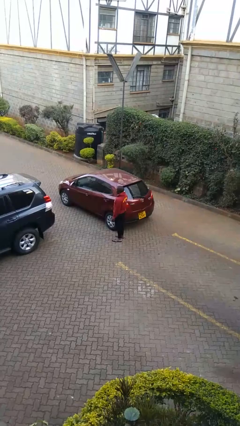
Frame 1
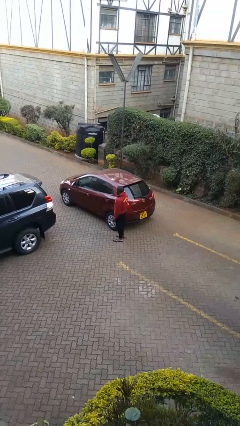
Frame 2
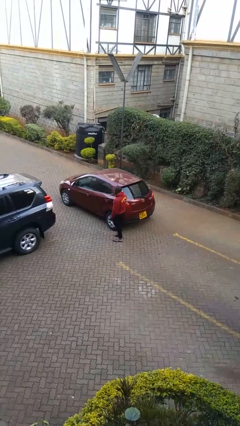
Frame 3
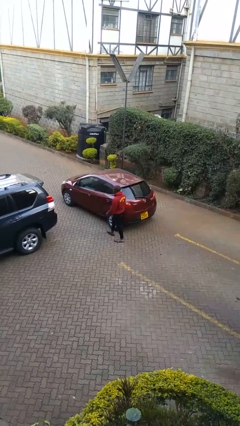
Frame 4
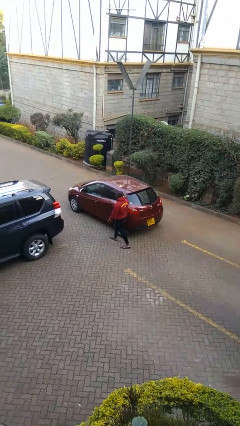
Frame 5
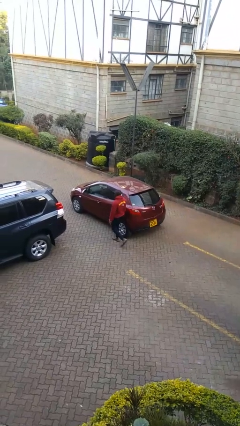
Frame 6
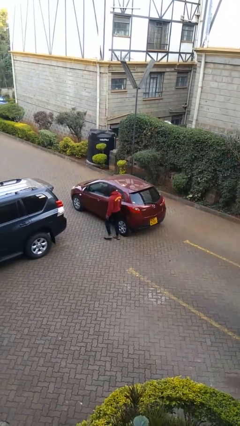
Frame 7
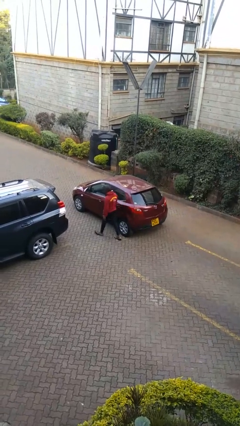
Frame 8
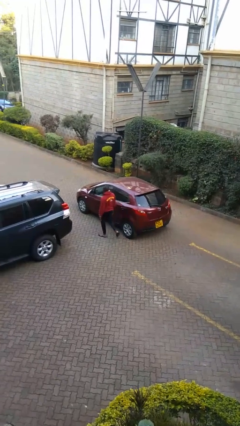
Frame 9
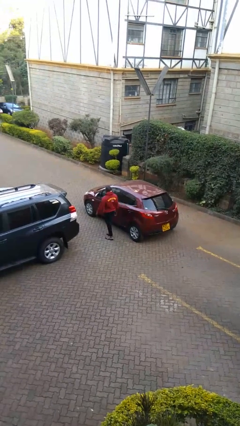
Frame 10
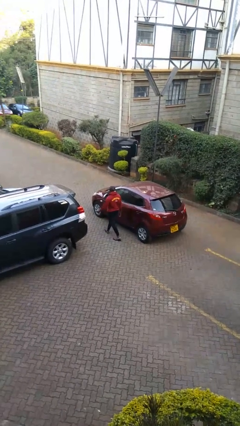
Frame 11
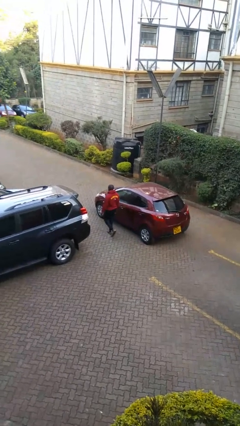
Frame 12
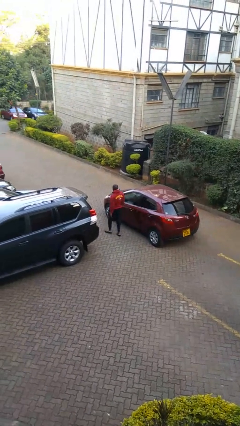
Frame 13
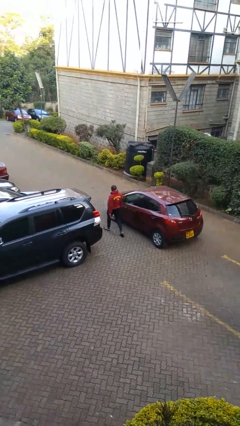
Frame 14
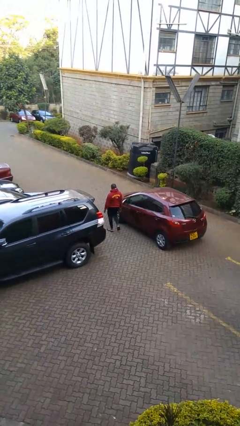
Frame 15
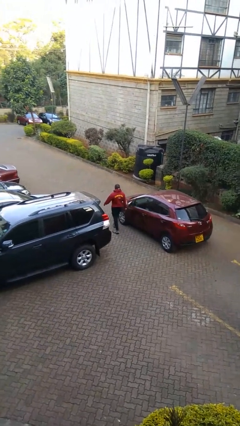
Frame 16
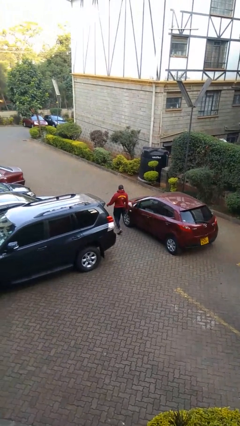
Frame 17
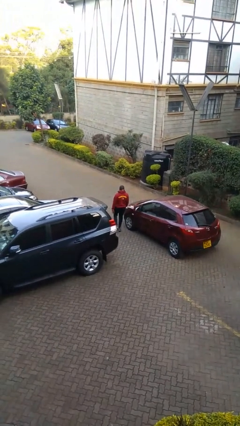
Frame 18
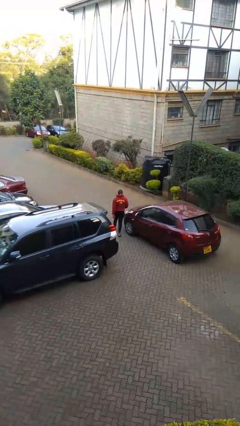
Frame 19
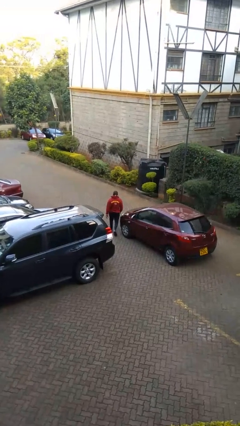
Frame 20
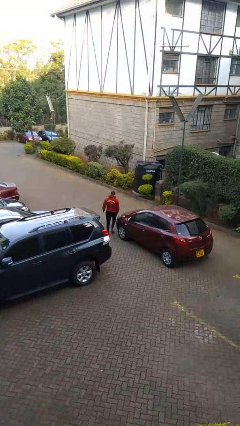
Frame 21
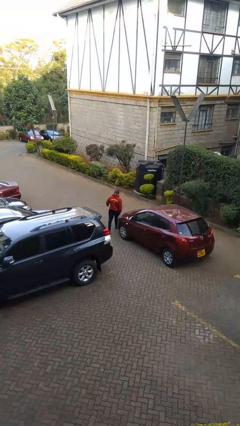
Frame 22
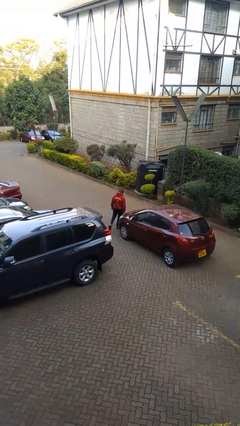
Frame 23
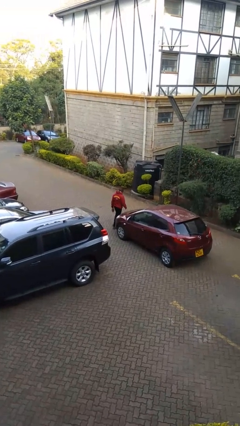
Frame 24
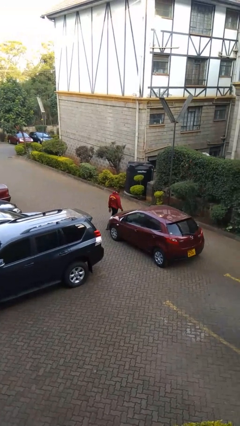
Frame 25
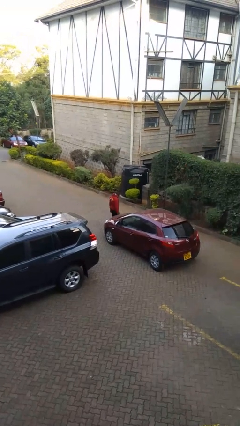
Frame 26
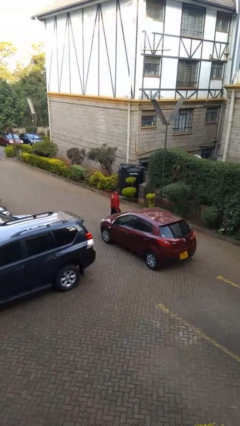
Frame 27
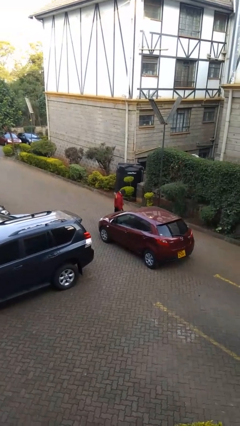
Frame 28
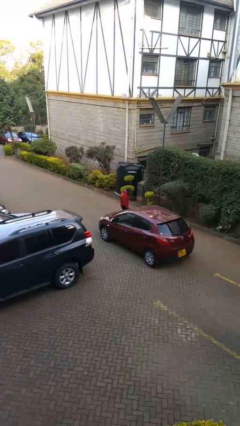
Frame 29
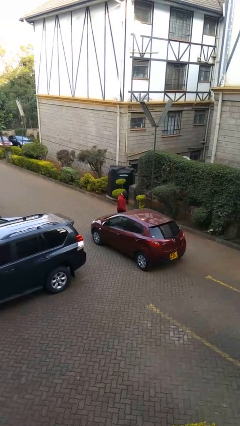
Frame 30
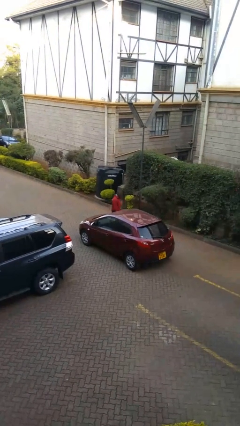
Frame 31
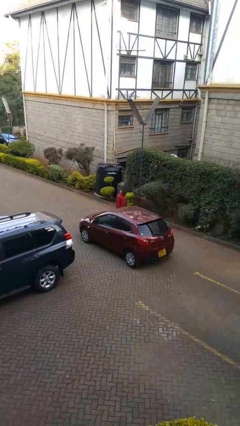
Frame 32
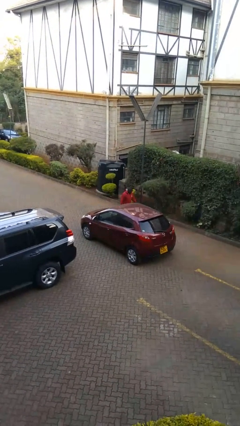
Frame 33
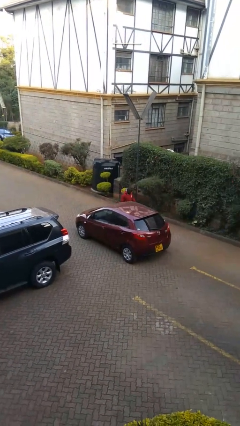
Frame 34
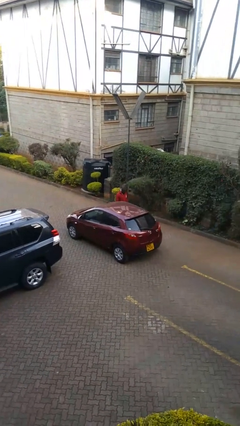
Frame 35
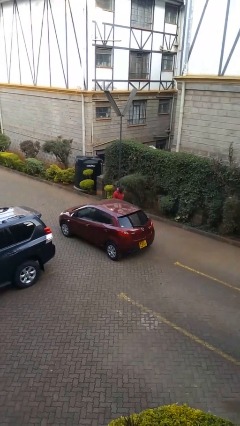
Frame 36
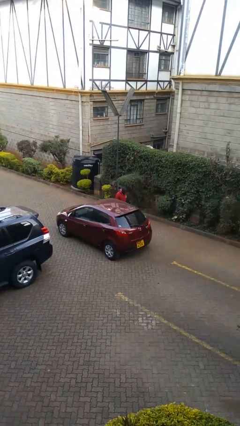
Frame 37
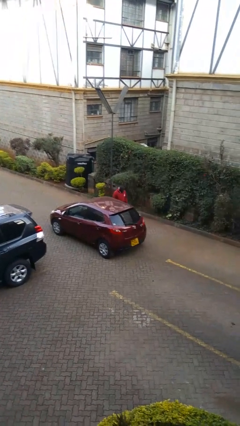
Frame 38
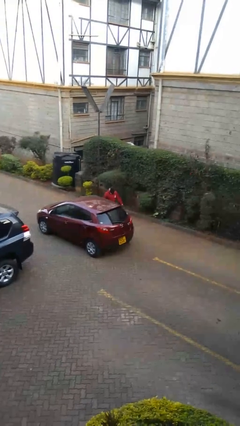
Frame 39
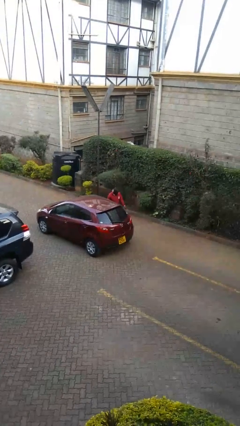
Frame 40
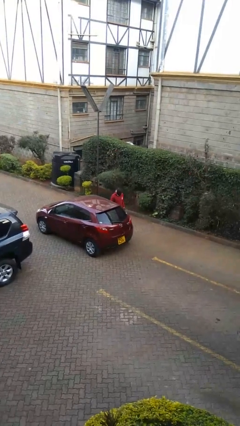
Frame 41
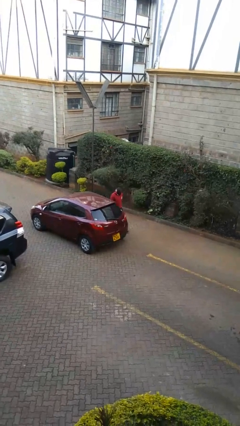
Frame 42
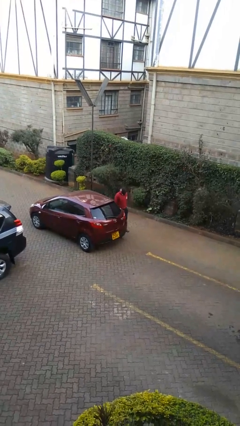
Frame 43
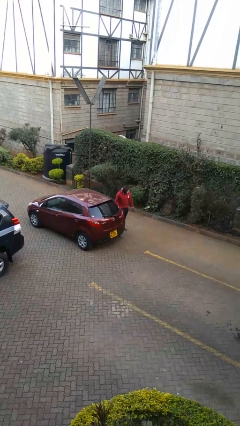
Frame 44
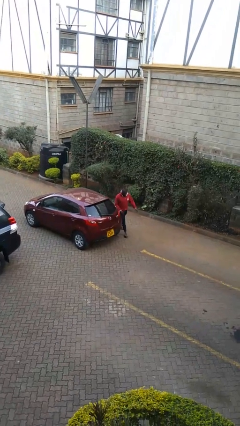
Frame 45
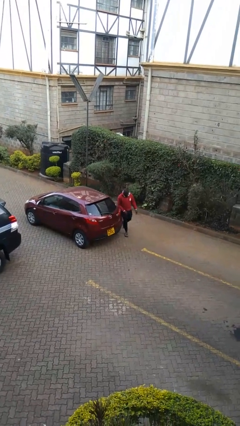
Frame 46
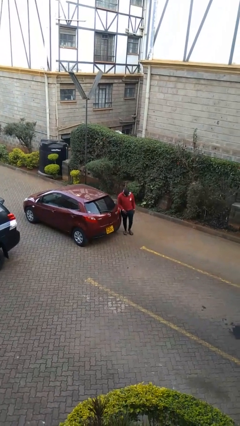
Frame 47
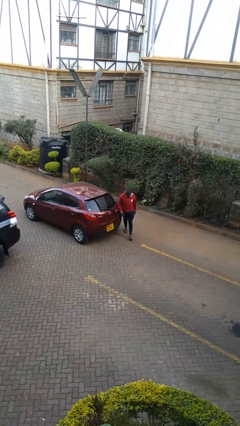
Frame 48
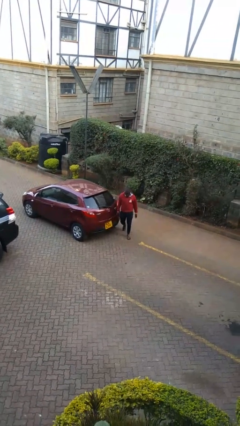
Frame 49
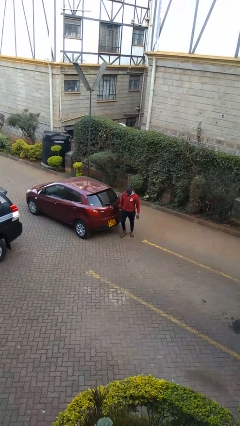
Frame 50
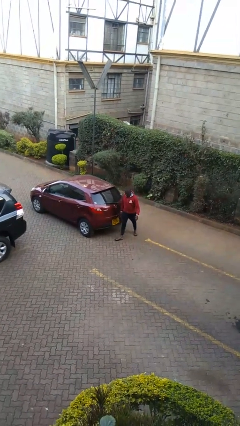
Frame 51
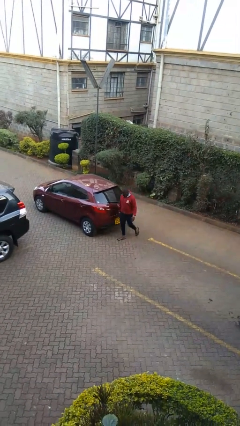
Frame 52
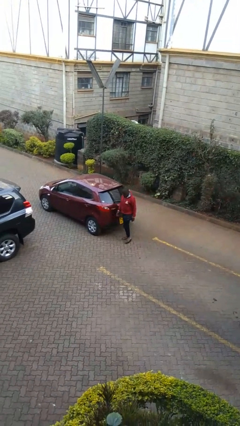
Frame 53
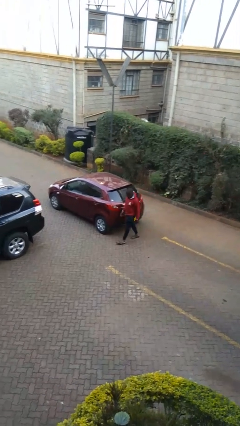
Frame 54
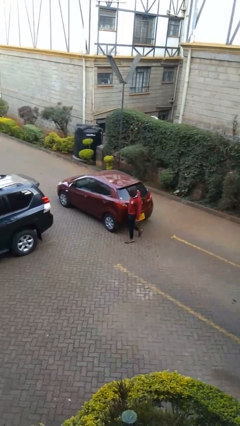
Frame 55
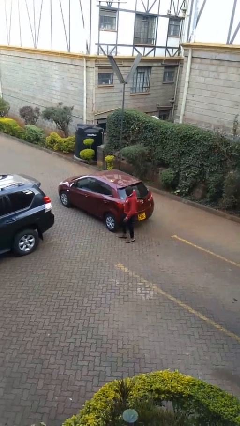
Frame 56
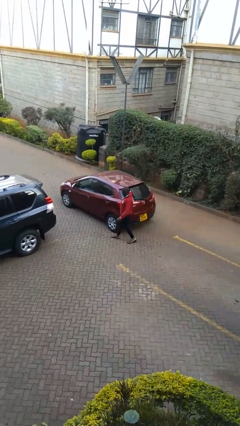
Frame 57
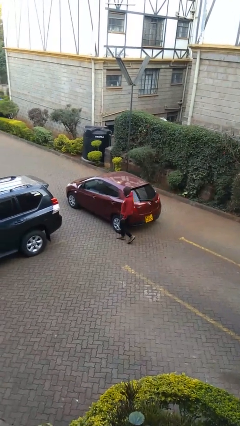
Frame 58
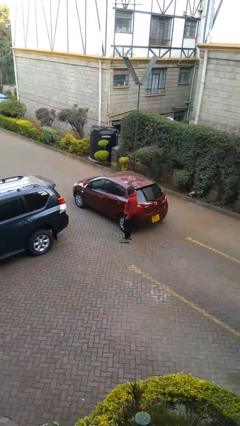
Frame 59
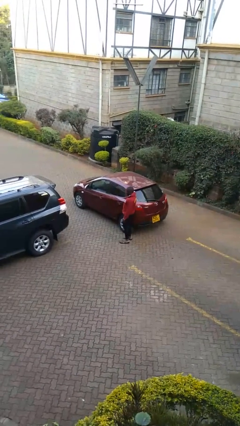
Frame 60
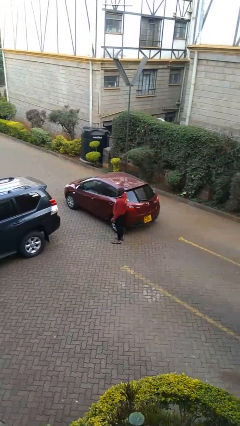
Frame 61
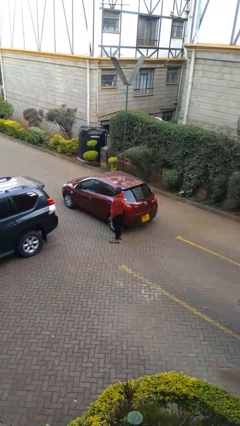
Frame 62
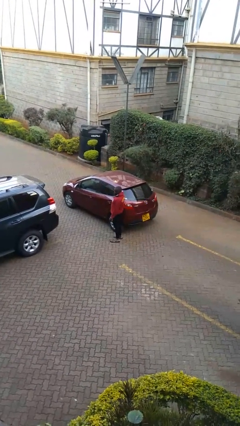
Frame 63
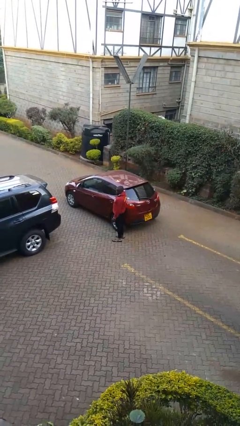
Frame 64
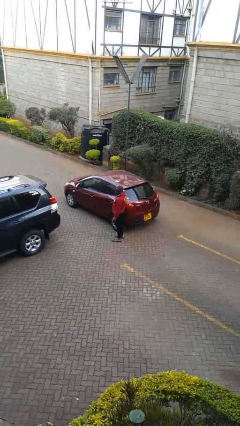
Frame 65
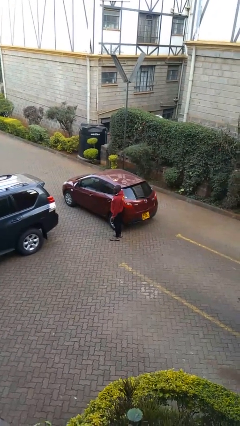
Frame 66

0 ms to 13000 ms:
person walks around car

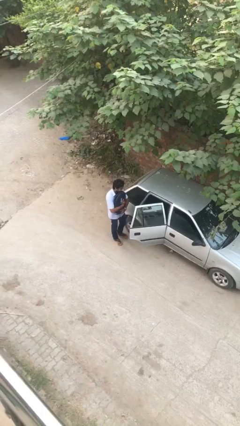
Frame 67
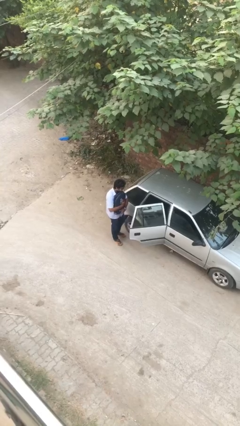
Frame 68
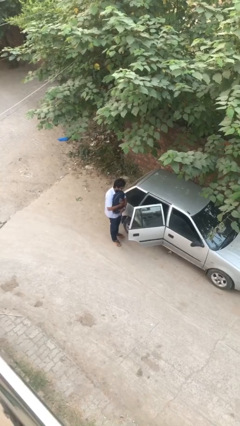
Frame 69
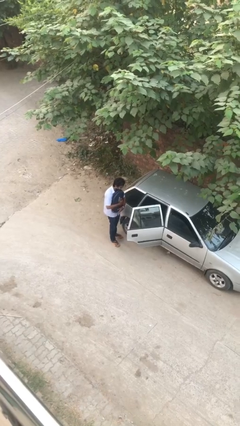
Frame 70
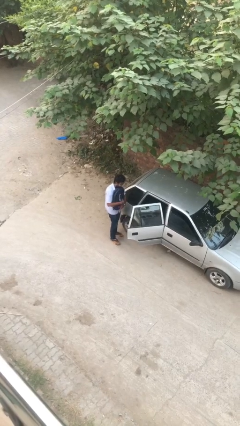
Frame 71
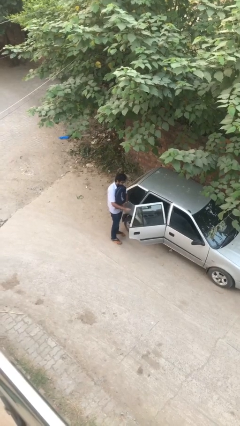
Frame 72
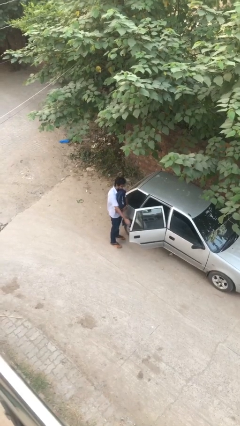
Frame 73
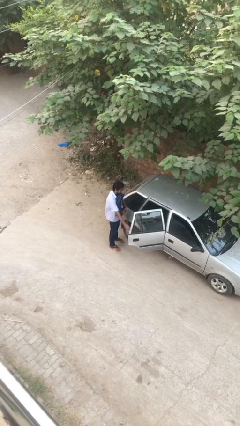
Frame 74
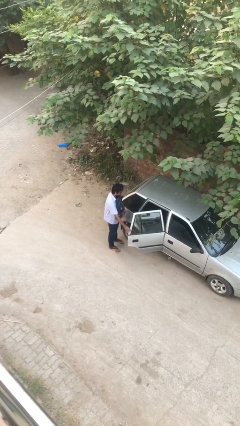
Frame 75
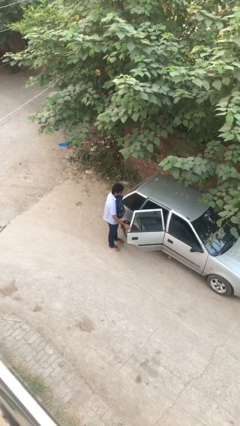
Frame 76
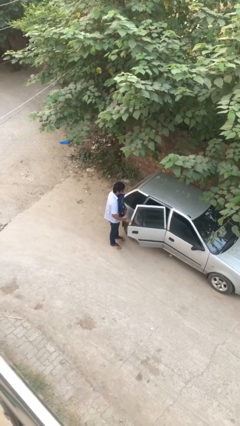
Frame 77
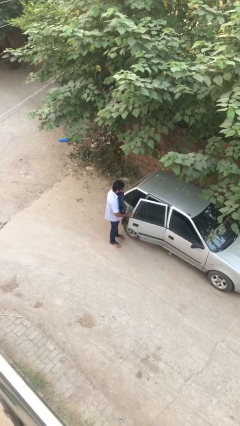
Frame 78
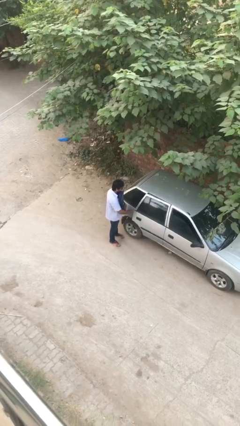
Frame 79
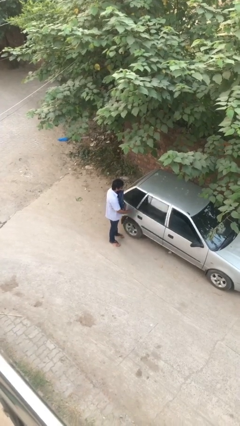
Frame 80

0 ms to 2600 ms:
person closes car door

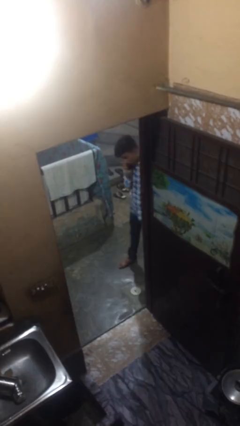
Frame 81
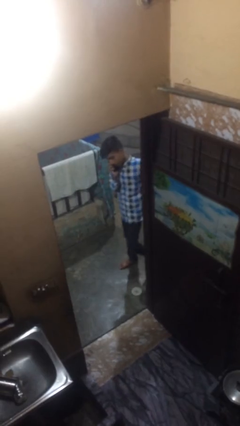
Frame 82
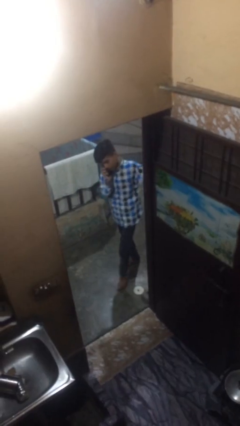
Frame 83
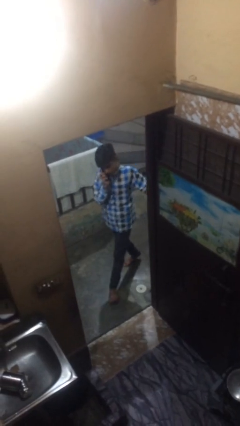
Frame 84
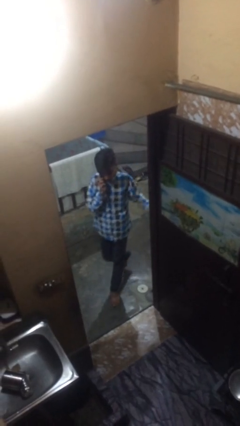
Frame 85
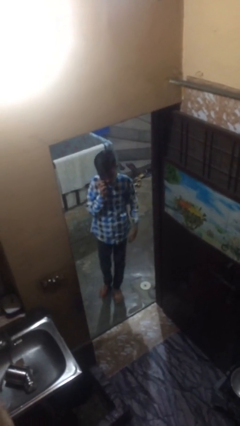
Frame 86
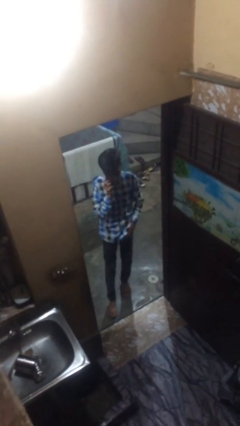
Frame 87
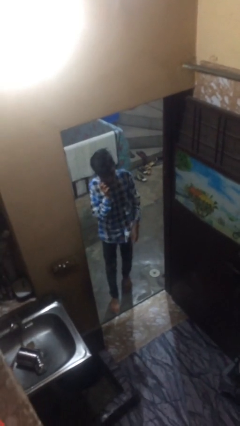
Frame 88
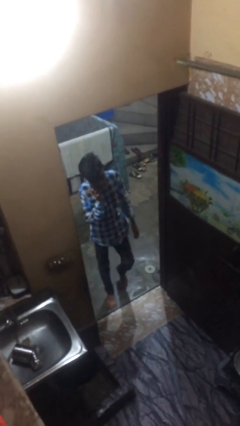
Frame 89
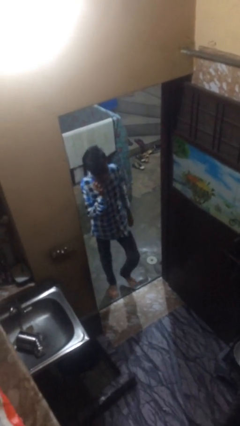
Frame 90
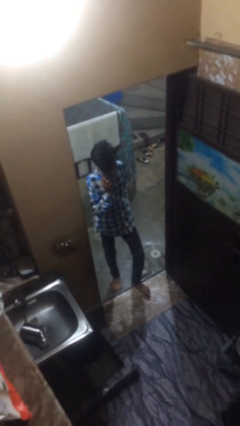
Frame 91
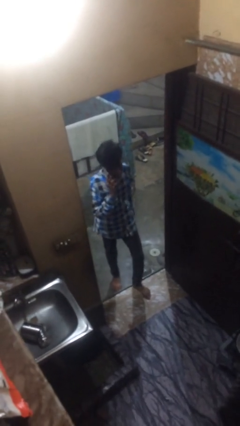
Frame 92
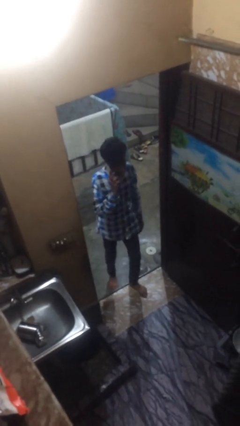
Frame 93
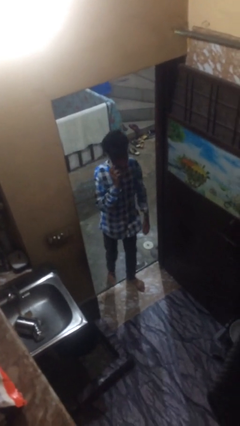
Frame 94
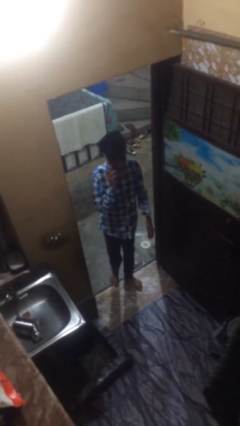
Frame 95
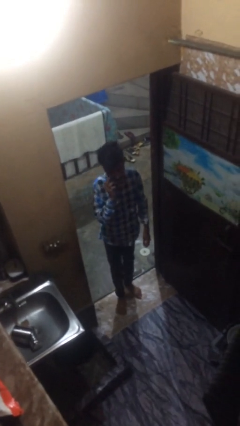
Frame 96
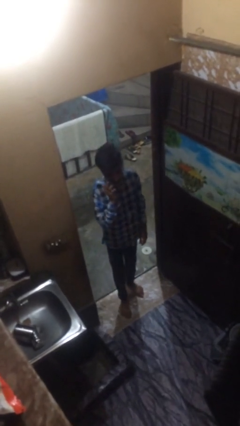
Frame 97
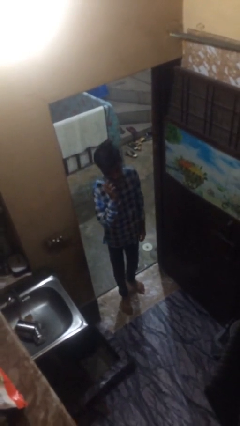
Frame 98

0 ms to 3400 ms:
person enters scene through structure
